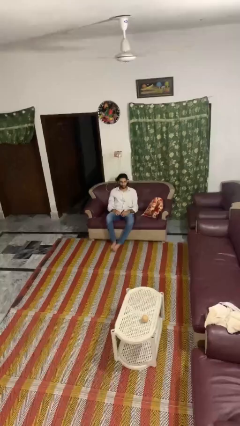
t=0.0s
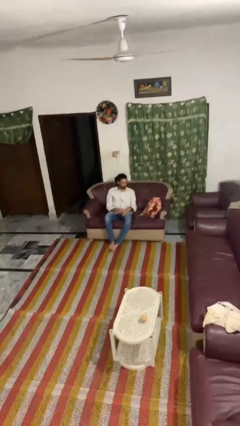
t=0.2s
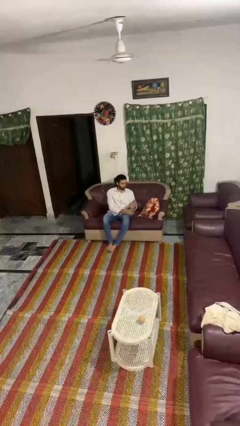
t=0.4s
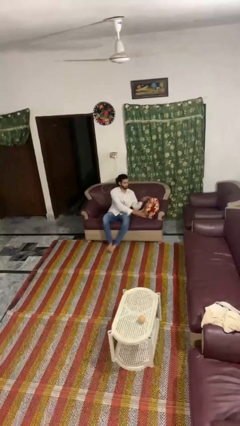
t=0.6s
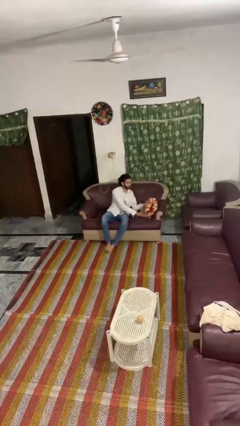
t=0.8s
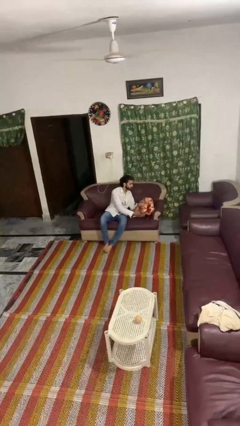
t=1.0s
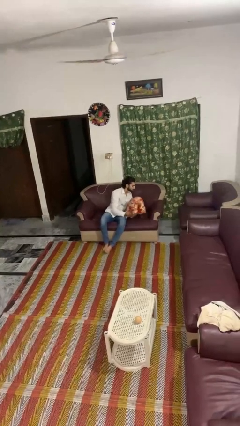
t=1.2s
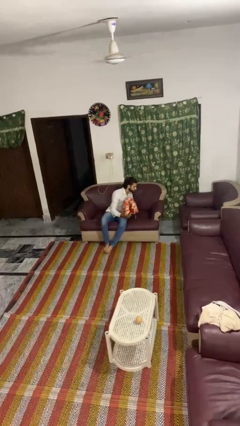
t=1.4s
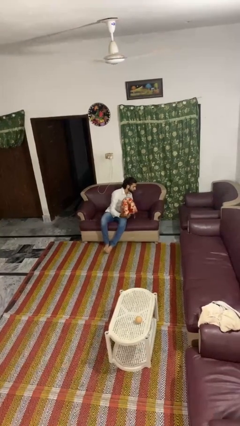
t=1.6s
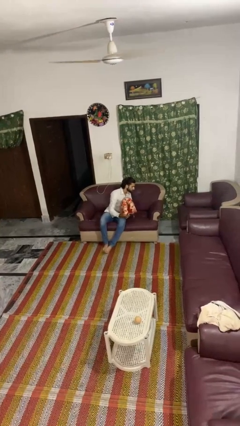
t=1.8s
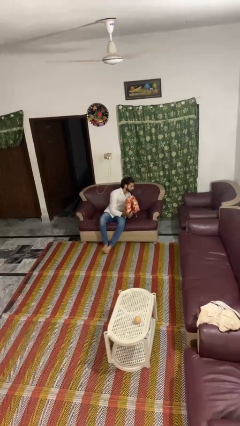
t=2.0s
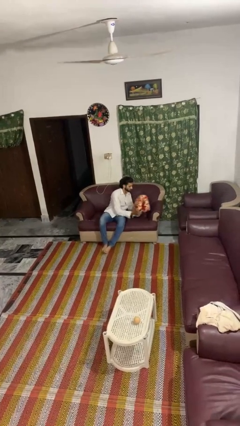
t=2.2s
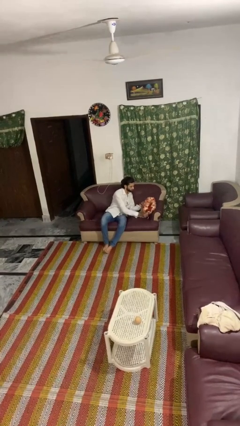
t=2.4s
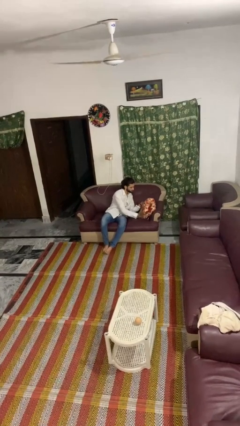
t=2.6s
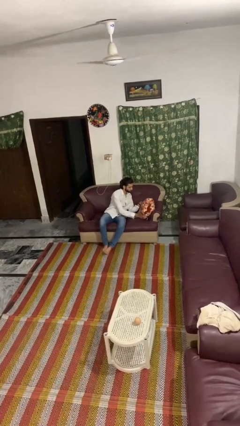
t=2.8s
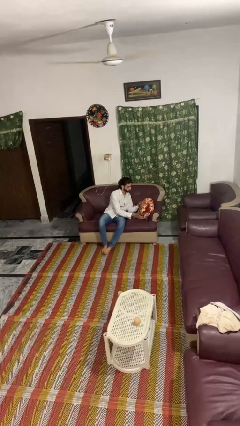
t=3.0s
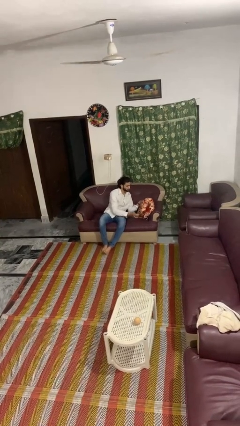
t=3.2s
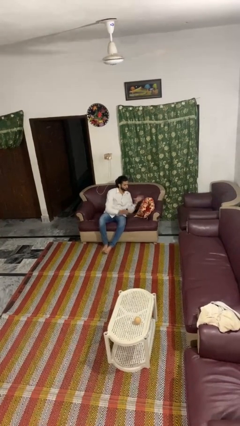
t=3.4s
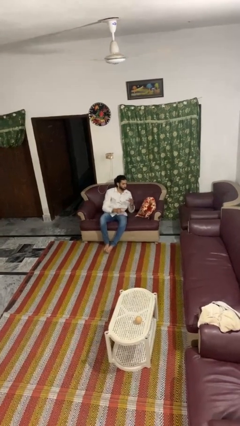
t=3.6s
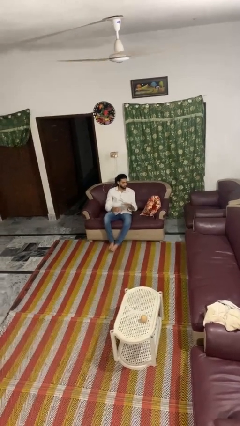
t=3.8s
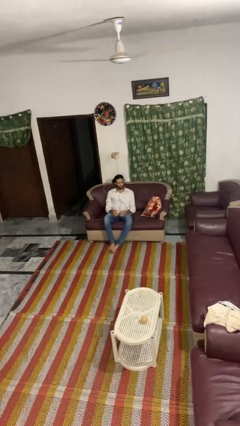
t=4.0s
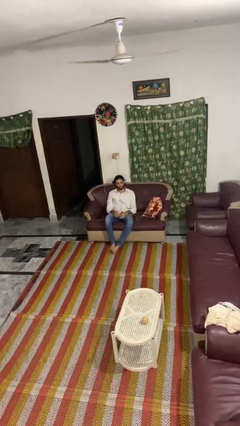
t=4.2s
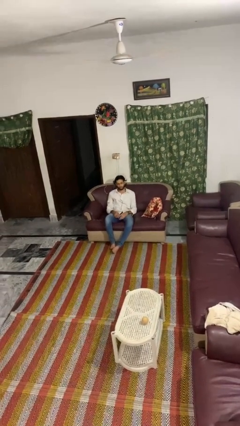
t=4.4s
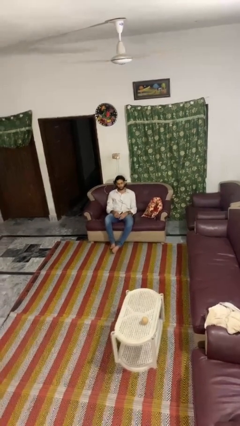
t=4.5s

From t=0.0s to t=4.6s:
person searches in couch

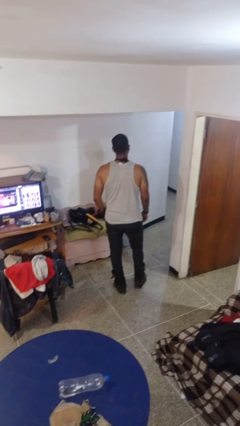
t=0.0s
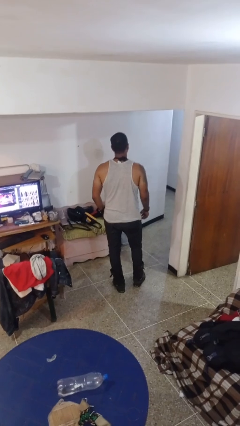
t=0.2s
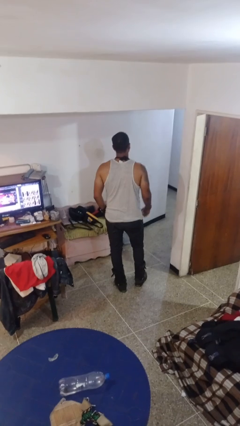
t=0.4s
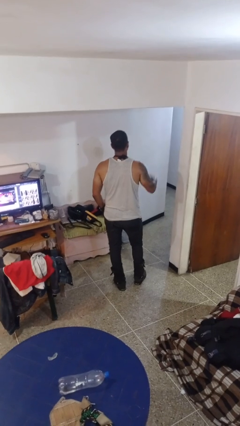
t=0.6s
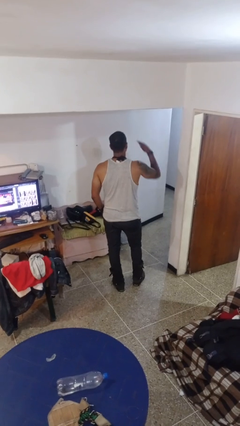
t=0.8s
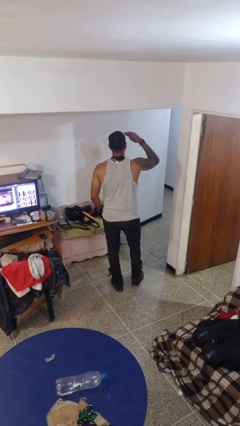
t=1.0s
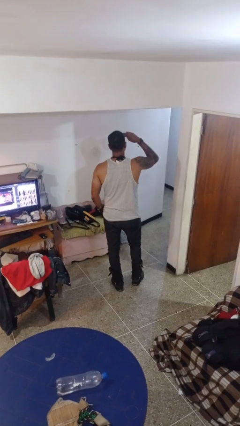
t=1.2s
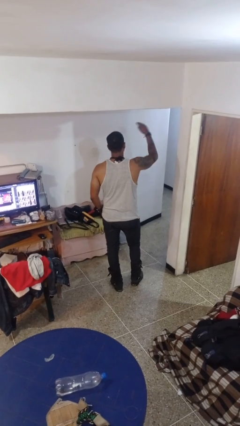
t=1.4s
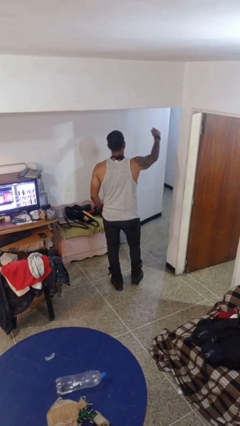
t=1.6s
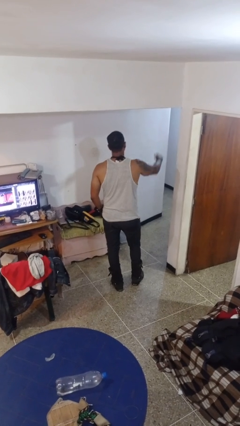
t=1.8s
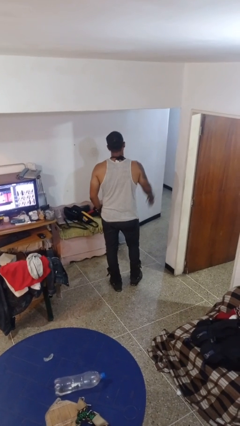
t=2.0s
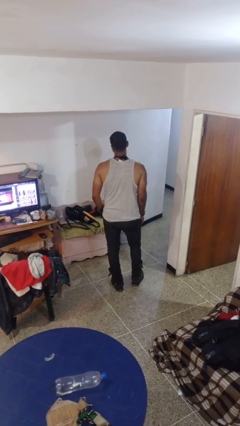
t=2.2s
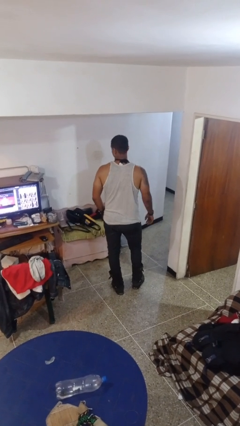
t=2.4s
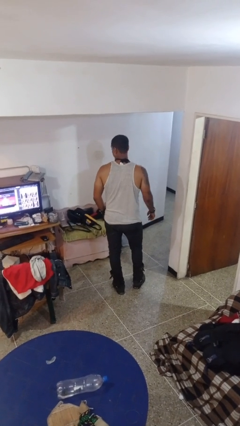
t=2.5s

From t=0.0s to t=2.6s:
person salutes

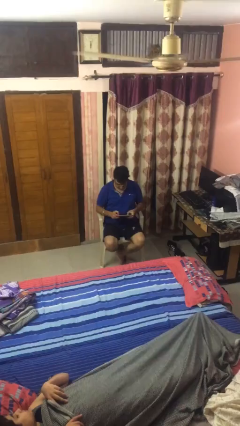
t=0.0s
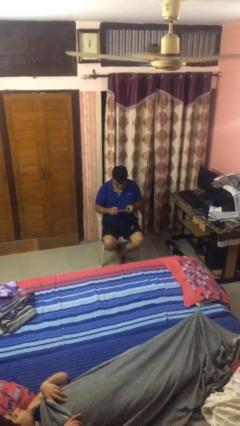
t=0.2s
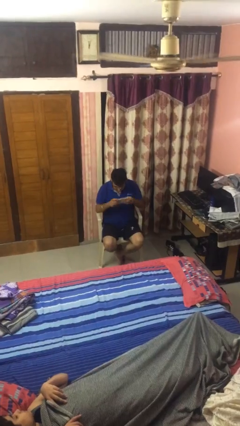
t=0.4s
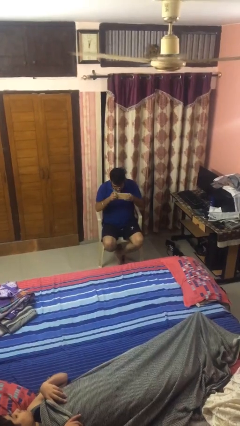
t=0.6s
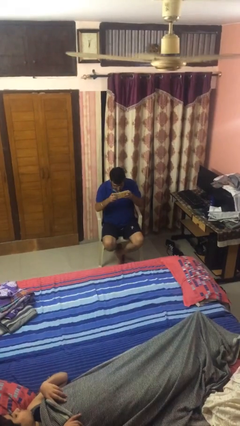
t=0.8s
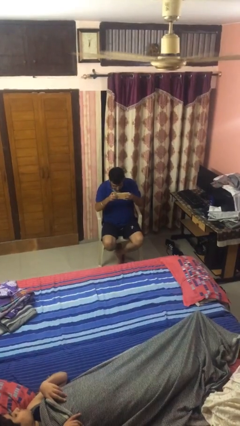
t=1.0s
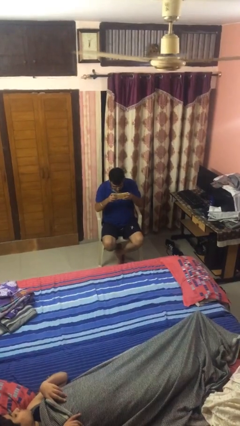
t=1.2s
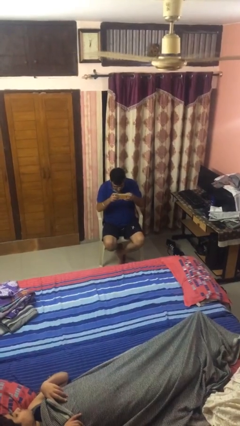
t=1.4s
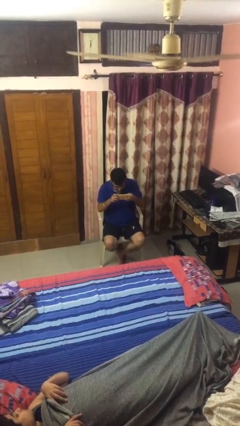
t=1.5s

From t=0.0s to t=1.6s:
person interacts with handheld game

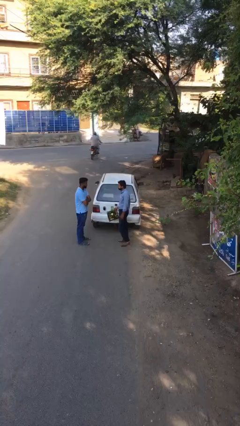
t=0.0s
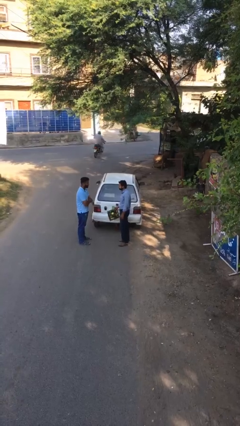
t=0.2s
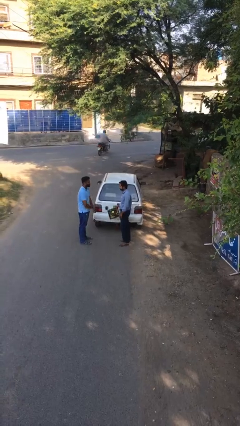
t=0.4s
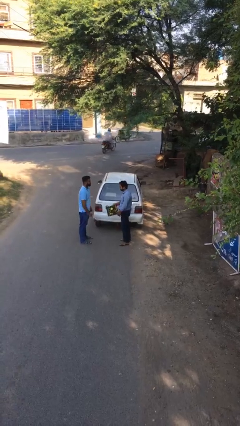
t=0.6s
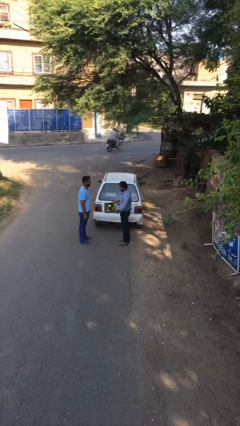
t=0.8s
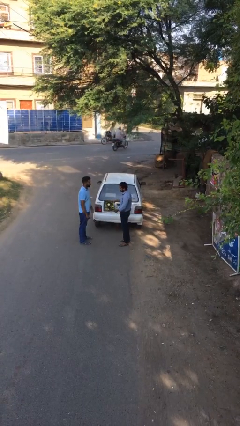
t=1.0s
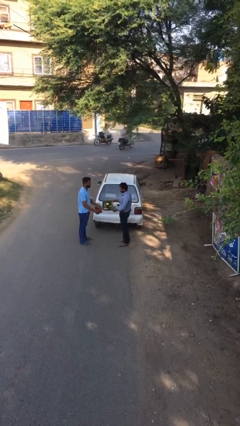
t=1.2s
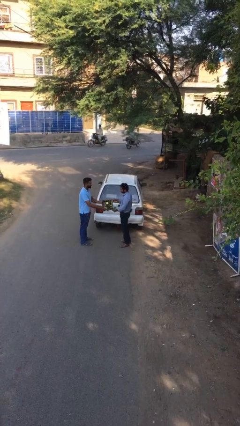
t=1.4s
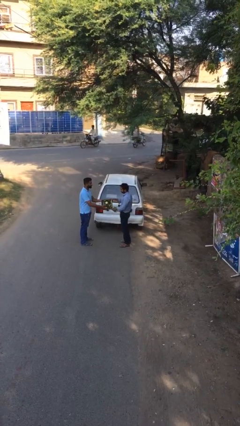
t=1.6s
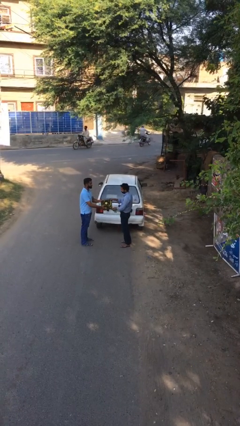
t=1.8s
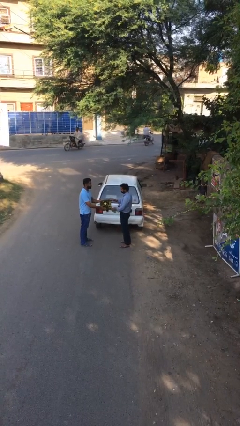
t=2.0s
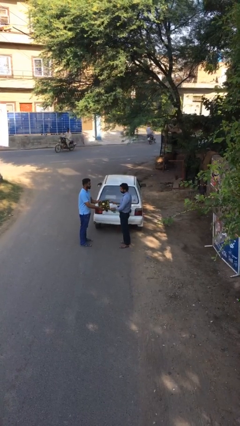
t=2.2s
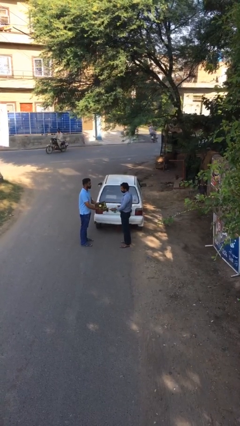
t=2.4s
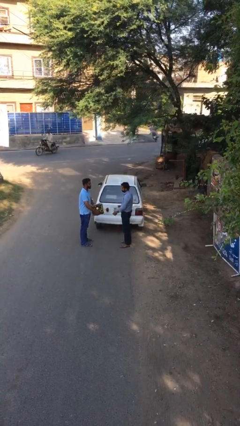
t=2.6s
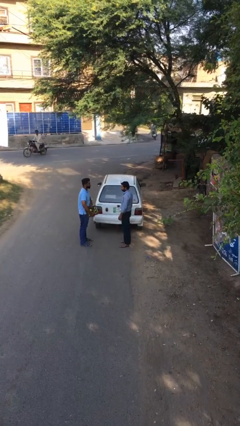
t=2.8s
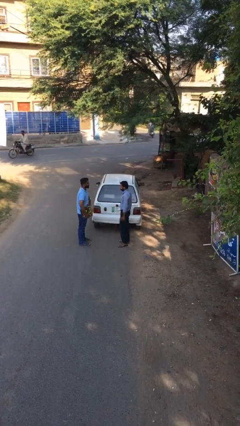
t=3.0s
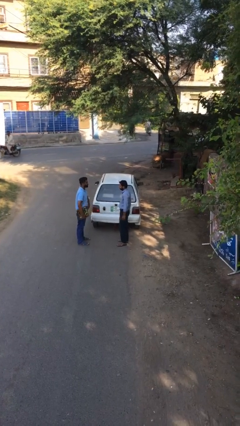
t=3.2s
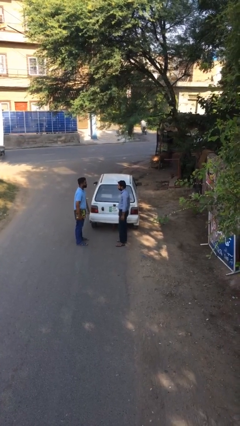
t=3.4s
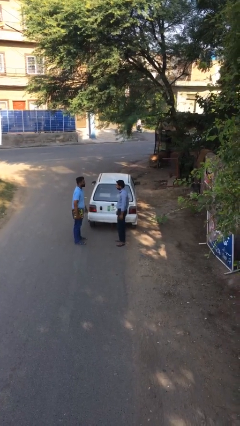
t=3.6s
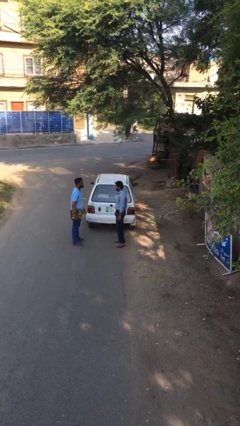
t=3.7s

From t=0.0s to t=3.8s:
person transfers object to person

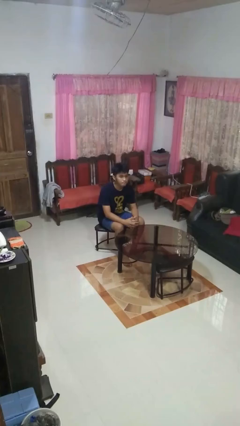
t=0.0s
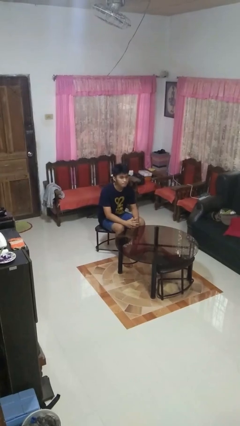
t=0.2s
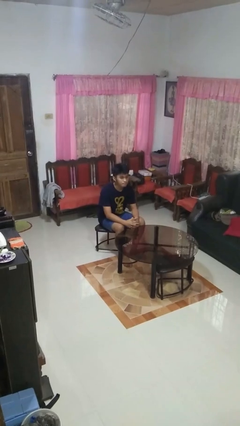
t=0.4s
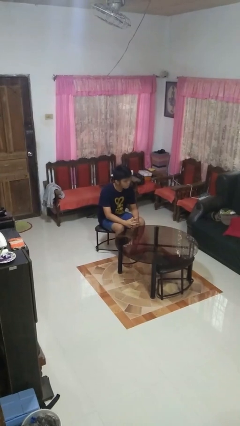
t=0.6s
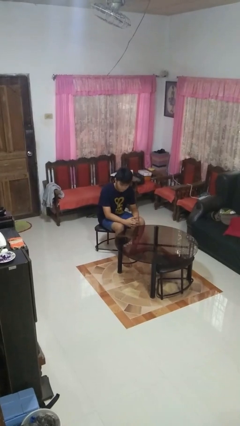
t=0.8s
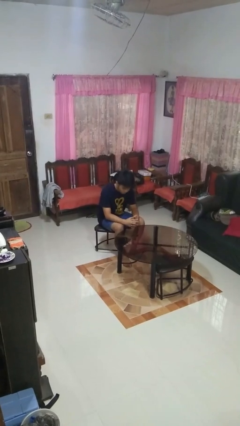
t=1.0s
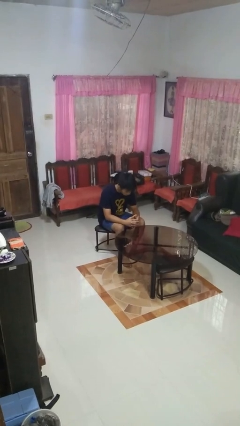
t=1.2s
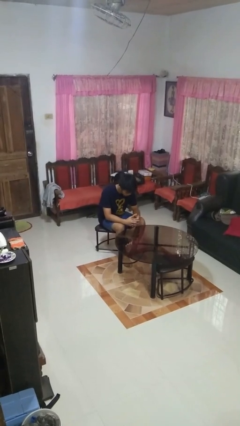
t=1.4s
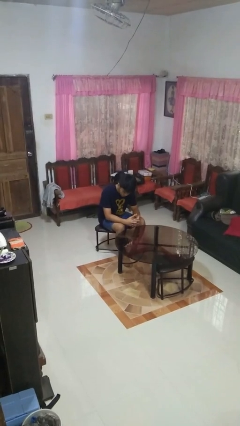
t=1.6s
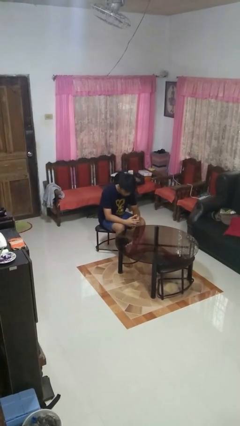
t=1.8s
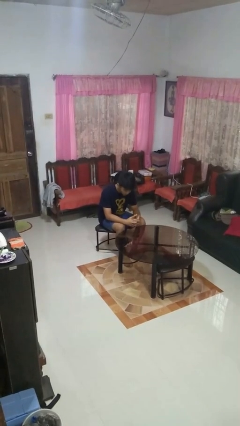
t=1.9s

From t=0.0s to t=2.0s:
person shakes head

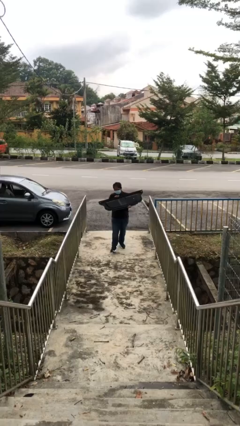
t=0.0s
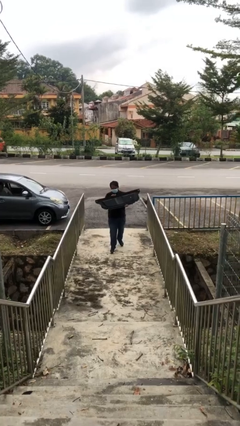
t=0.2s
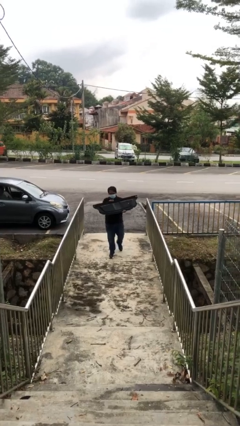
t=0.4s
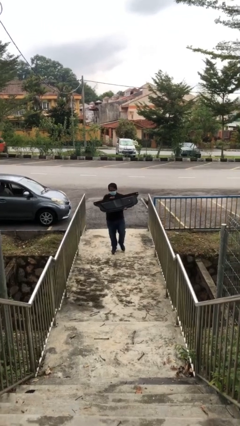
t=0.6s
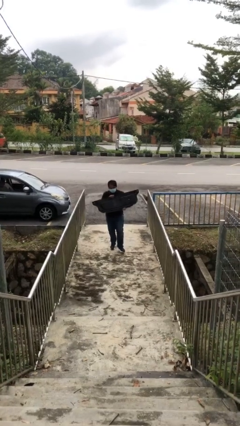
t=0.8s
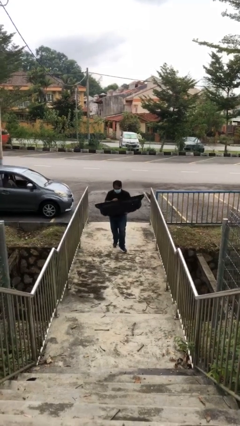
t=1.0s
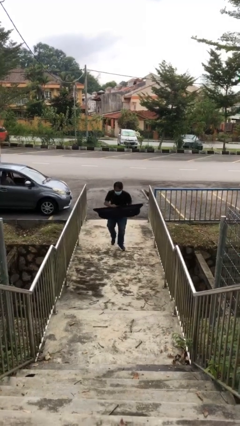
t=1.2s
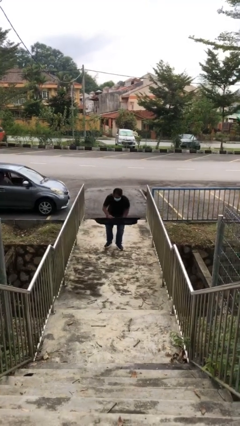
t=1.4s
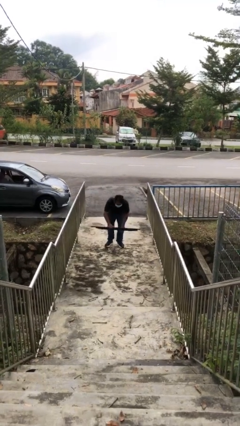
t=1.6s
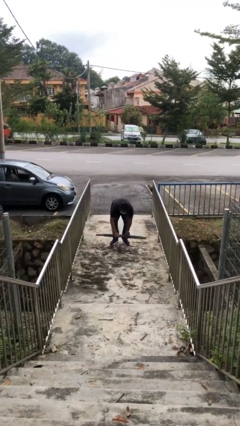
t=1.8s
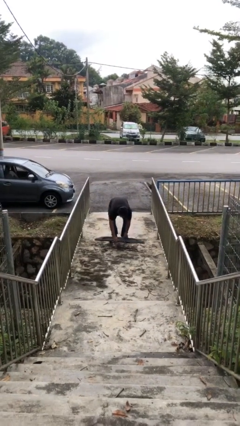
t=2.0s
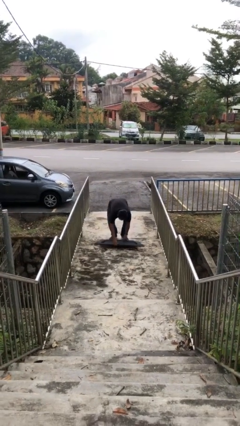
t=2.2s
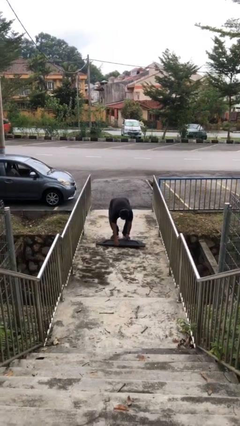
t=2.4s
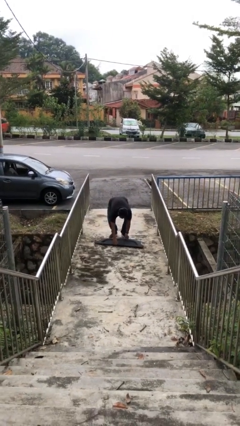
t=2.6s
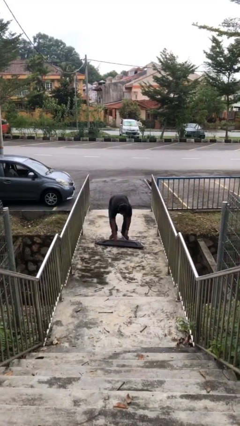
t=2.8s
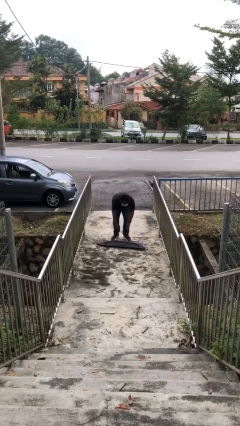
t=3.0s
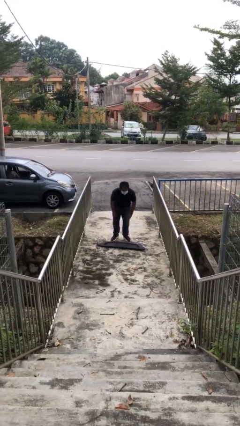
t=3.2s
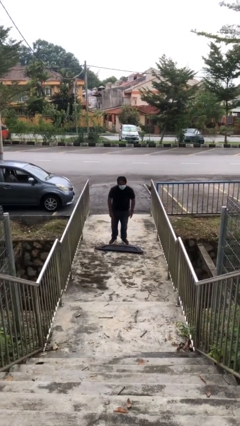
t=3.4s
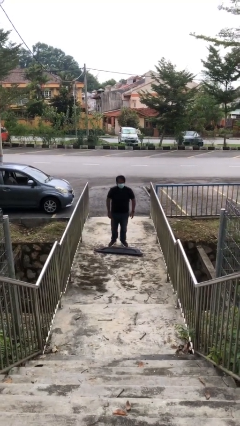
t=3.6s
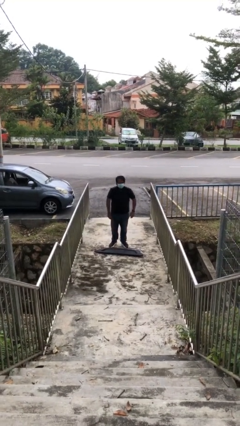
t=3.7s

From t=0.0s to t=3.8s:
person puts down object on floor
